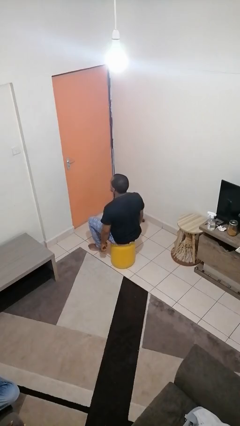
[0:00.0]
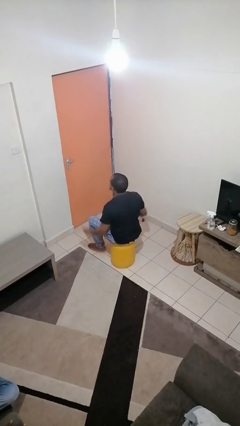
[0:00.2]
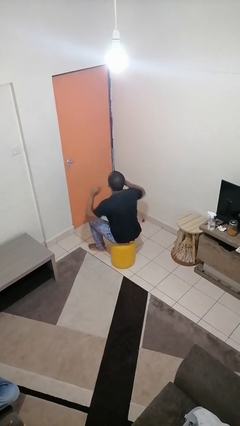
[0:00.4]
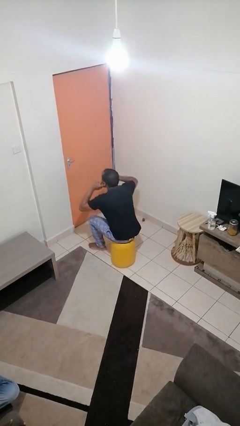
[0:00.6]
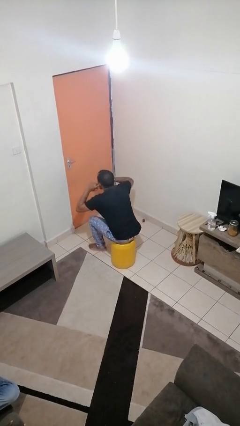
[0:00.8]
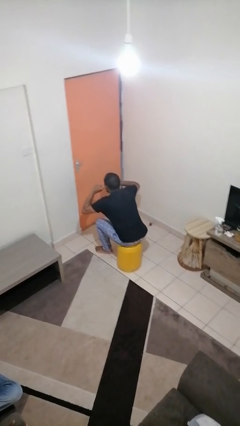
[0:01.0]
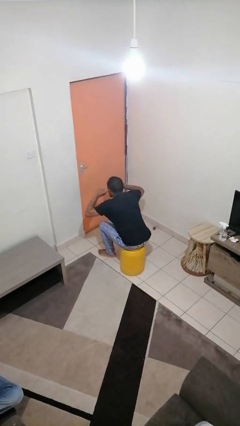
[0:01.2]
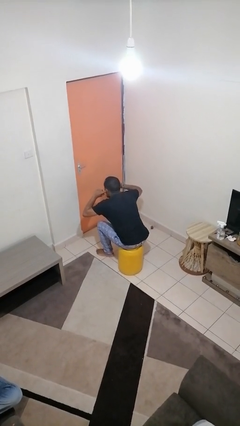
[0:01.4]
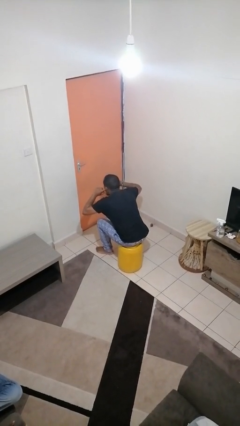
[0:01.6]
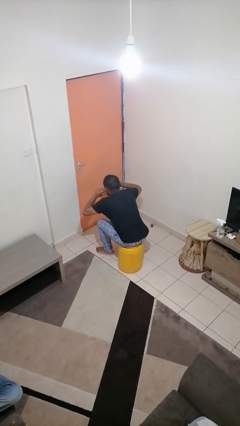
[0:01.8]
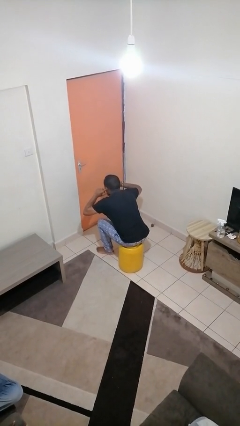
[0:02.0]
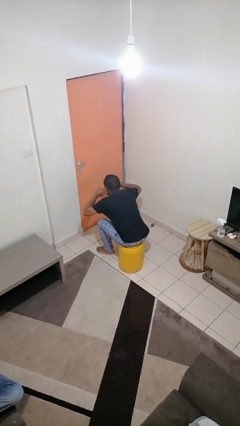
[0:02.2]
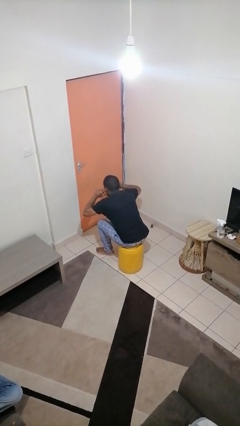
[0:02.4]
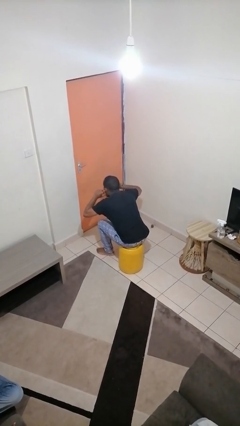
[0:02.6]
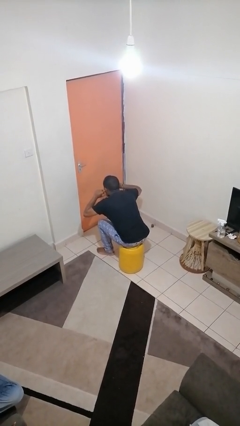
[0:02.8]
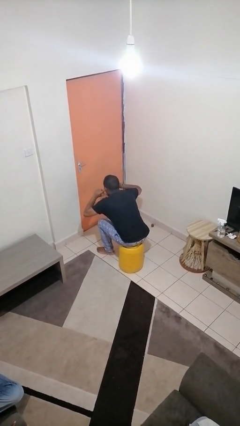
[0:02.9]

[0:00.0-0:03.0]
person puts fingers in ear

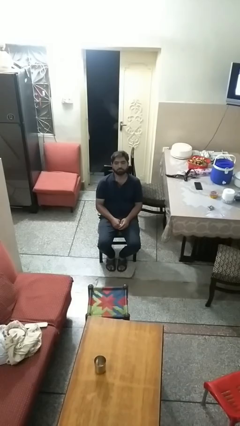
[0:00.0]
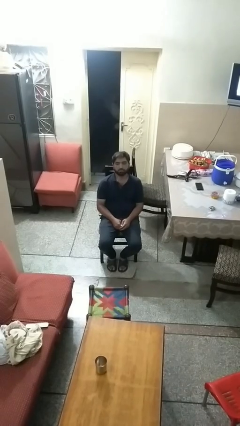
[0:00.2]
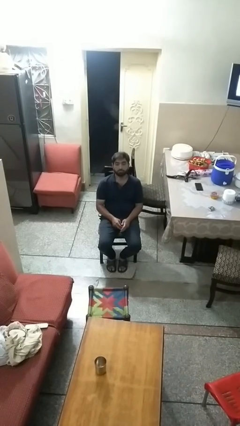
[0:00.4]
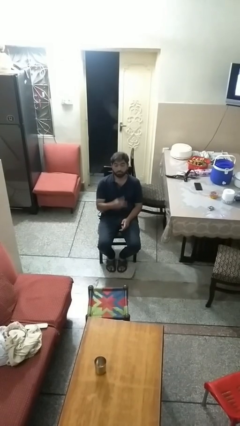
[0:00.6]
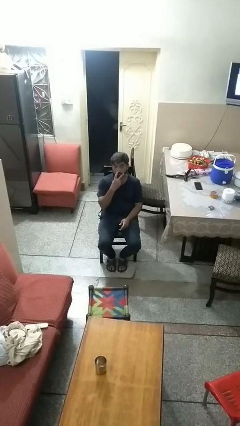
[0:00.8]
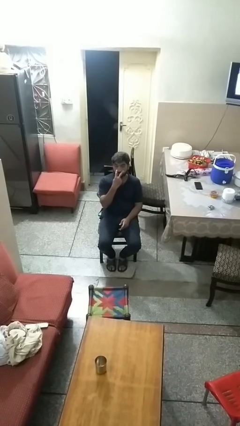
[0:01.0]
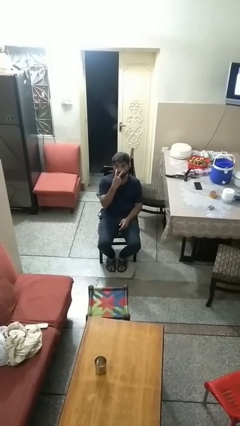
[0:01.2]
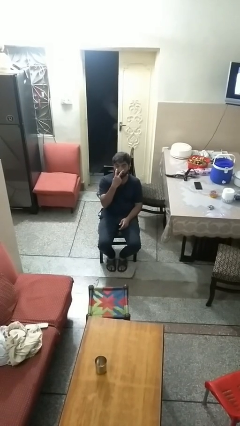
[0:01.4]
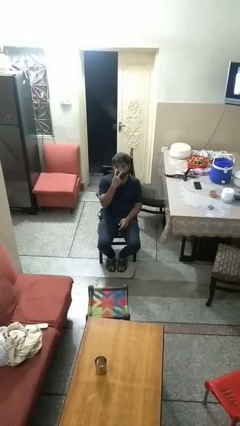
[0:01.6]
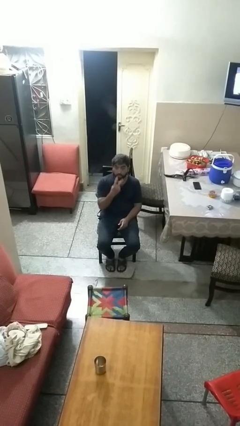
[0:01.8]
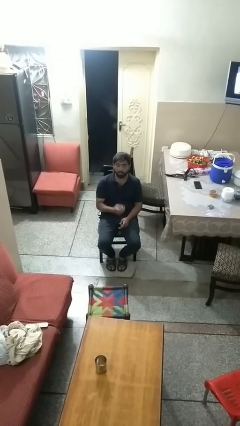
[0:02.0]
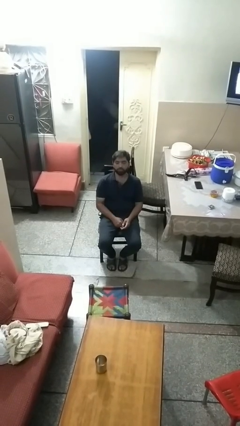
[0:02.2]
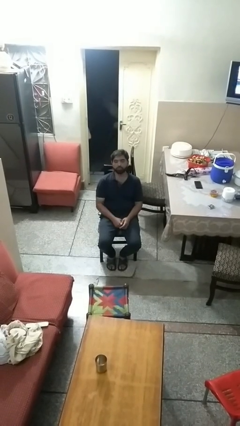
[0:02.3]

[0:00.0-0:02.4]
person gestures watch closely

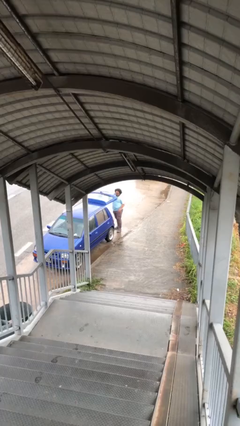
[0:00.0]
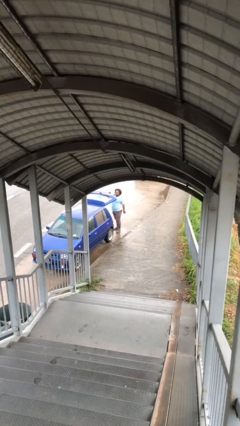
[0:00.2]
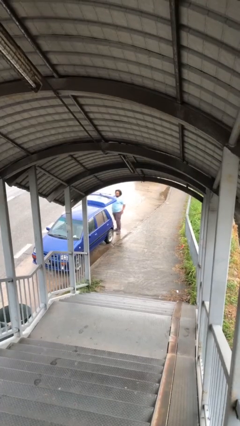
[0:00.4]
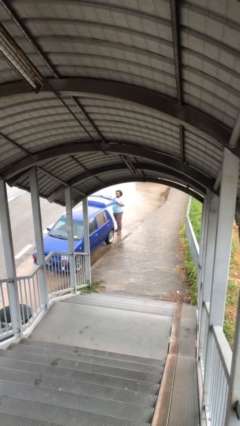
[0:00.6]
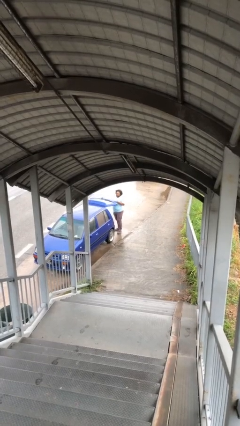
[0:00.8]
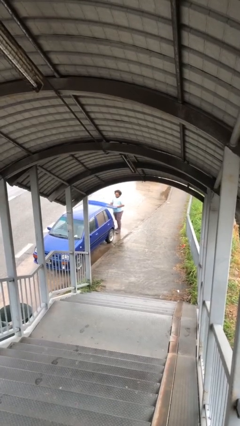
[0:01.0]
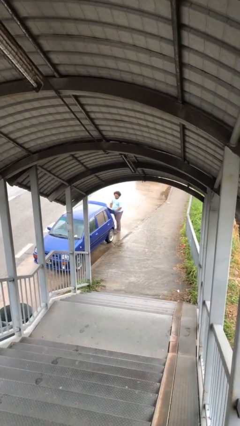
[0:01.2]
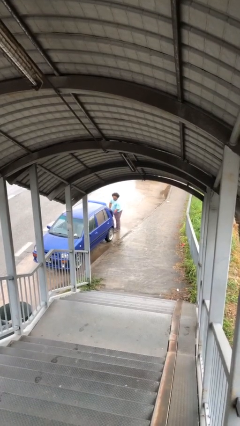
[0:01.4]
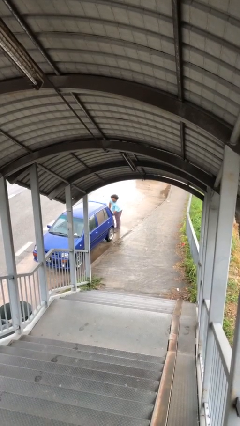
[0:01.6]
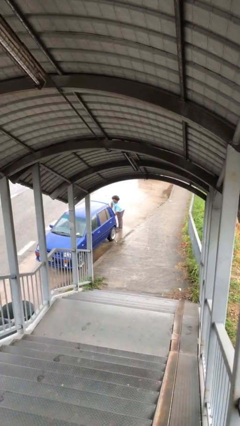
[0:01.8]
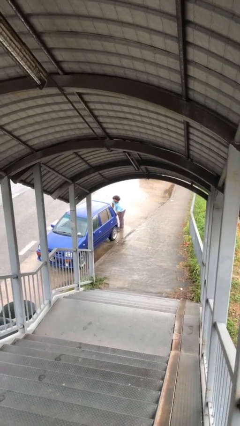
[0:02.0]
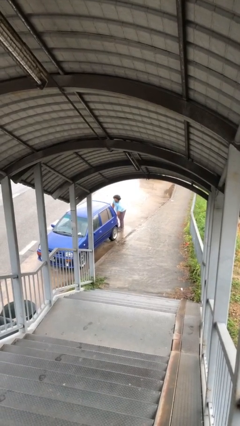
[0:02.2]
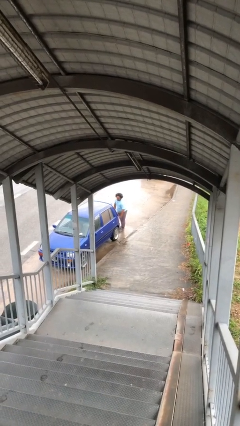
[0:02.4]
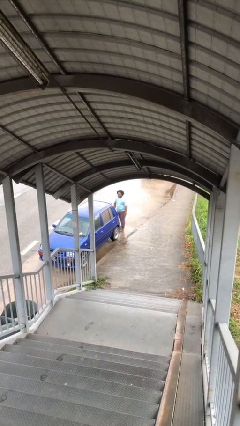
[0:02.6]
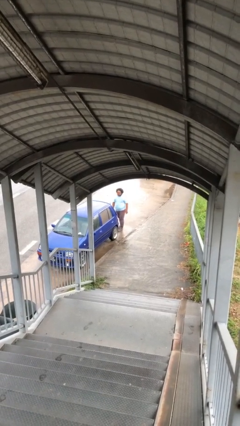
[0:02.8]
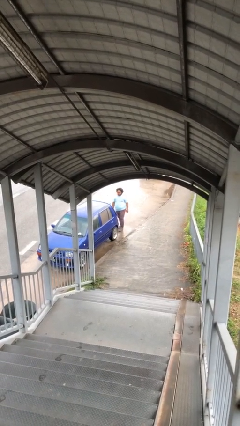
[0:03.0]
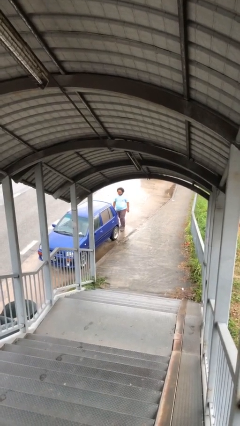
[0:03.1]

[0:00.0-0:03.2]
person closes car trunk

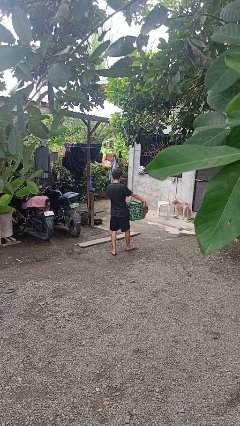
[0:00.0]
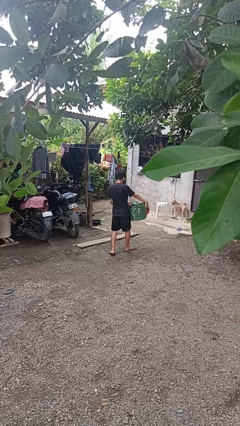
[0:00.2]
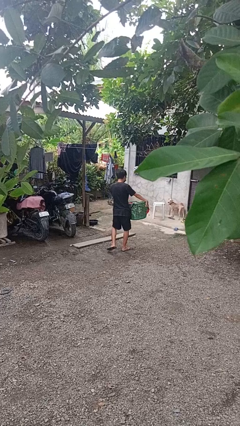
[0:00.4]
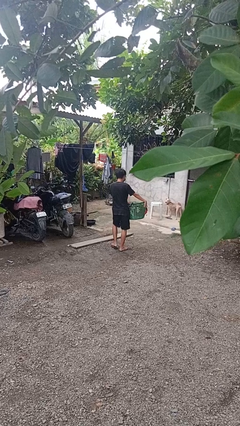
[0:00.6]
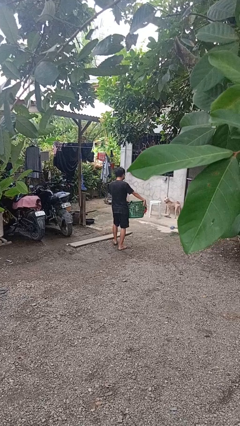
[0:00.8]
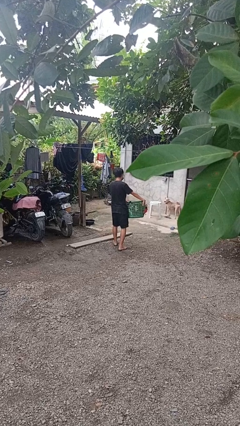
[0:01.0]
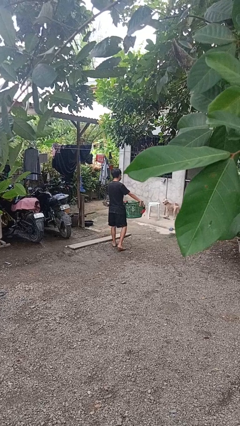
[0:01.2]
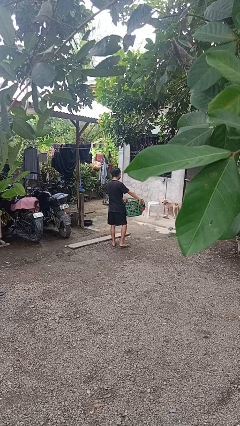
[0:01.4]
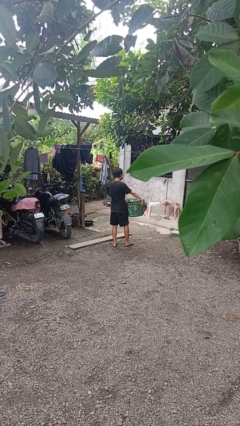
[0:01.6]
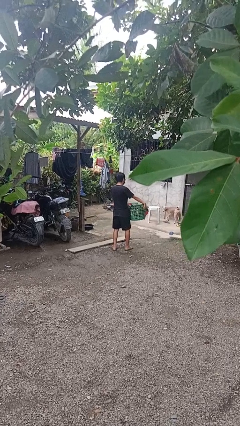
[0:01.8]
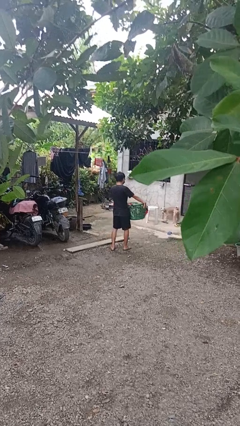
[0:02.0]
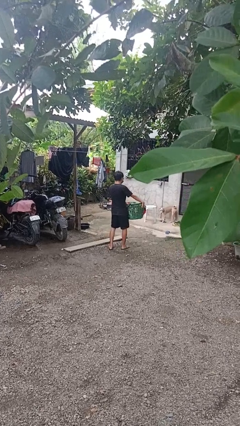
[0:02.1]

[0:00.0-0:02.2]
person carries laundry basket

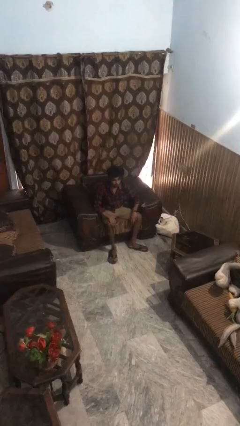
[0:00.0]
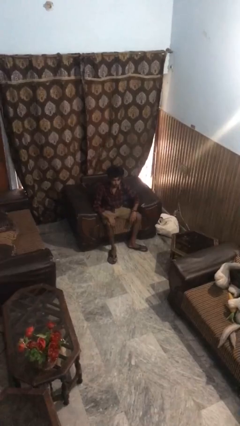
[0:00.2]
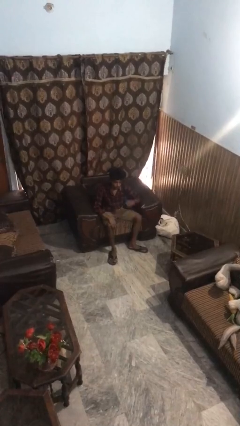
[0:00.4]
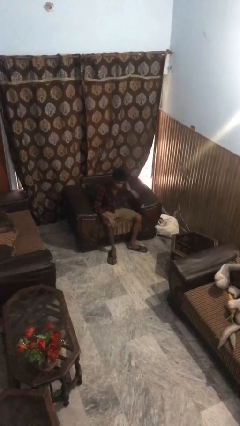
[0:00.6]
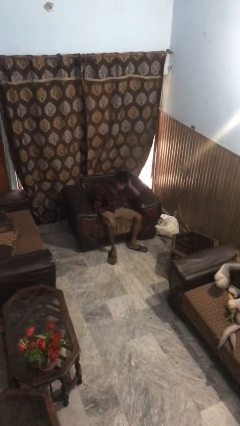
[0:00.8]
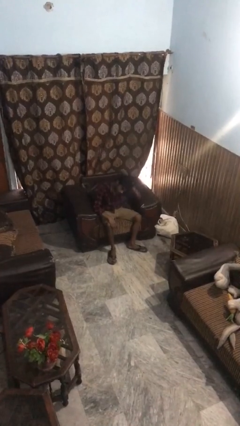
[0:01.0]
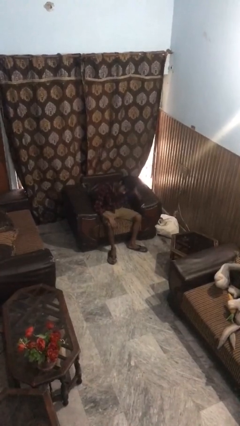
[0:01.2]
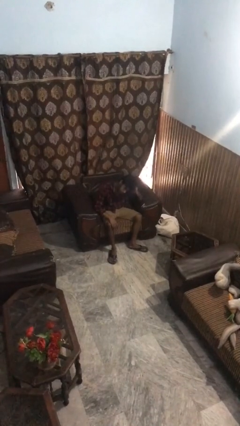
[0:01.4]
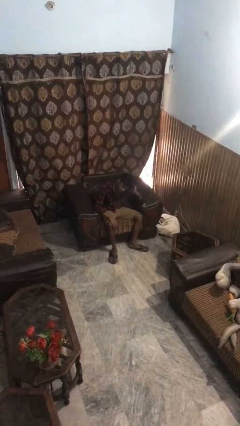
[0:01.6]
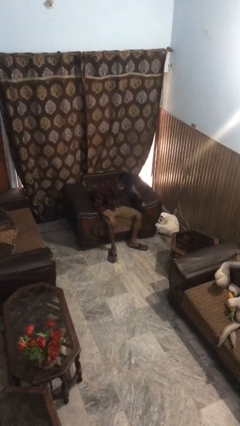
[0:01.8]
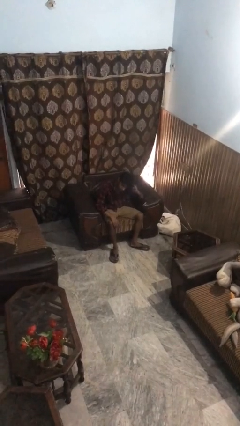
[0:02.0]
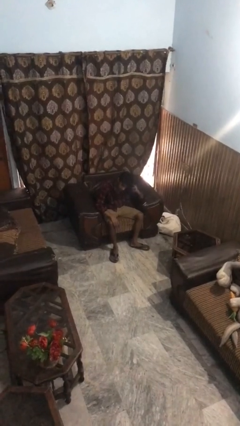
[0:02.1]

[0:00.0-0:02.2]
person strokes hair

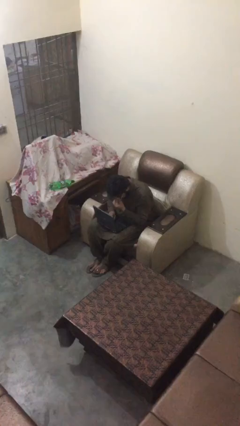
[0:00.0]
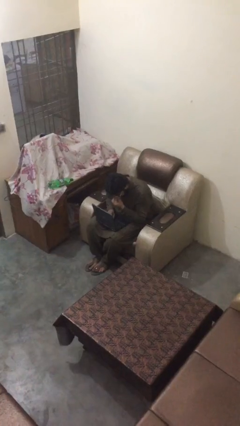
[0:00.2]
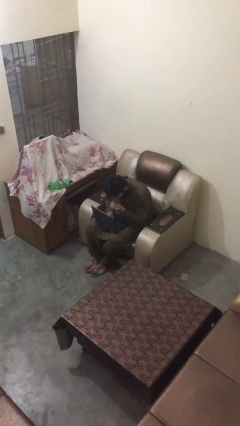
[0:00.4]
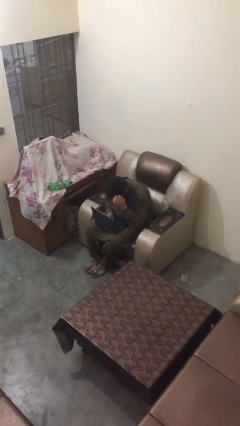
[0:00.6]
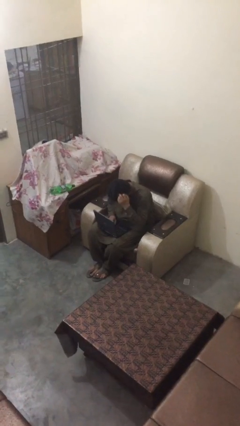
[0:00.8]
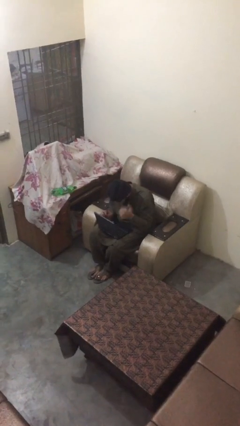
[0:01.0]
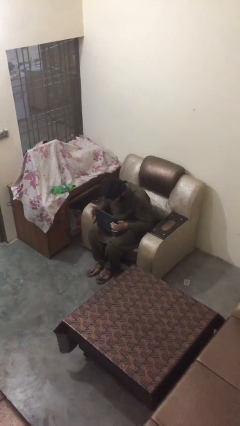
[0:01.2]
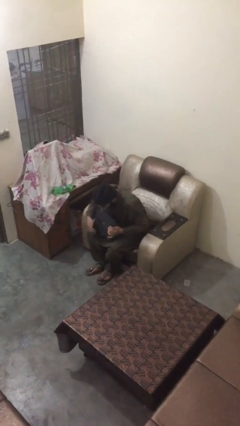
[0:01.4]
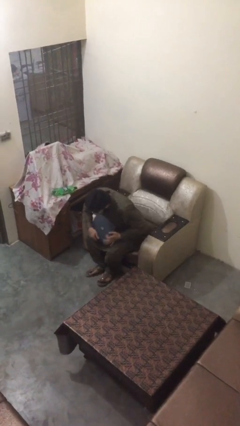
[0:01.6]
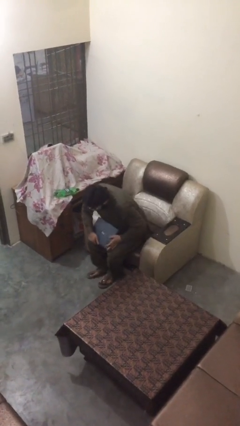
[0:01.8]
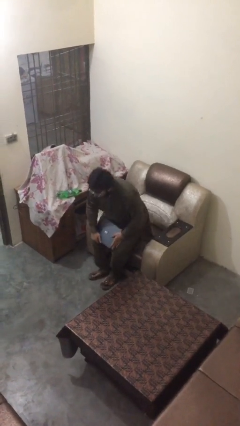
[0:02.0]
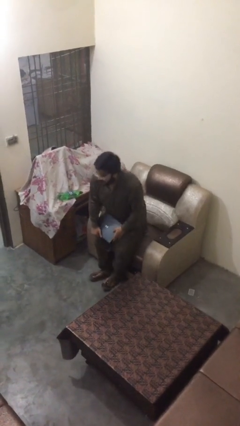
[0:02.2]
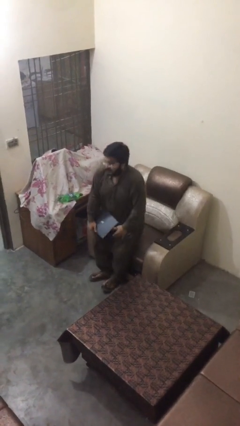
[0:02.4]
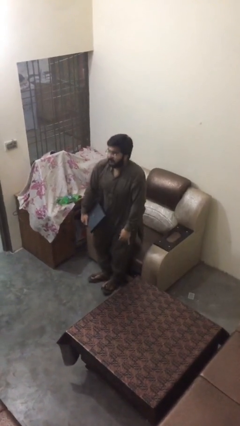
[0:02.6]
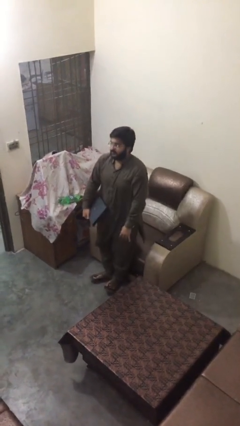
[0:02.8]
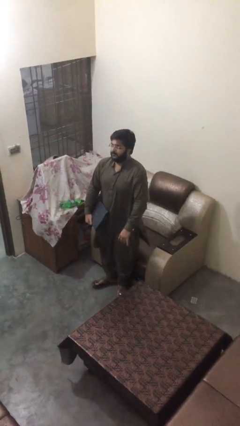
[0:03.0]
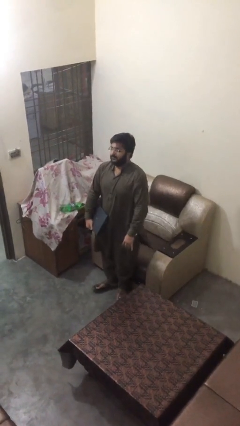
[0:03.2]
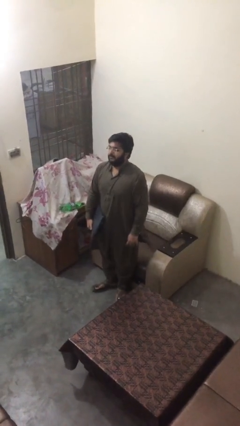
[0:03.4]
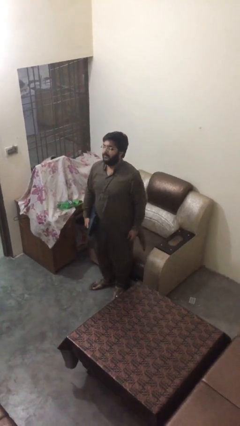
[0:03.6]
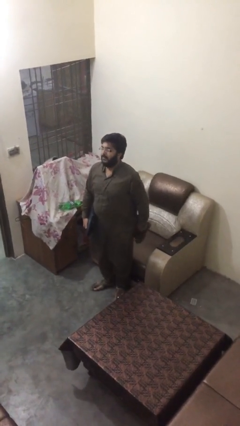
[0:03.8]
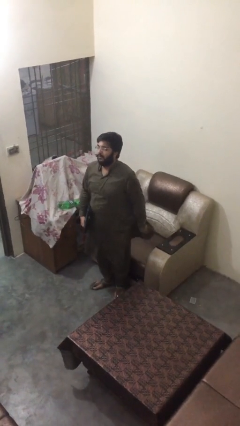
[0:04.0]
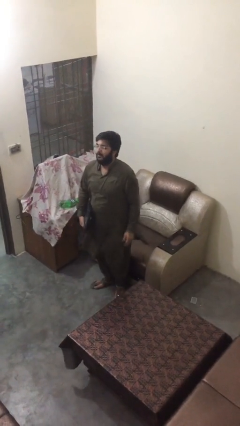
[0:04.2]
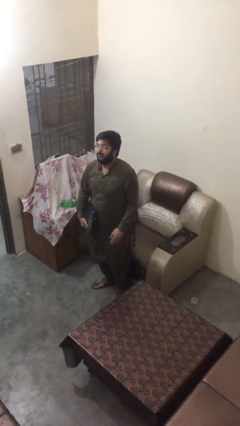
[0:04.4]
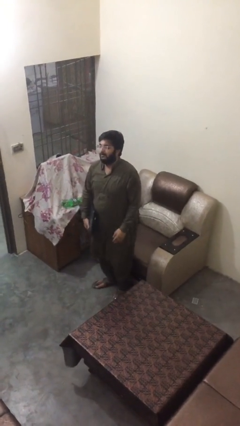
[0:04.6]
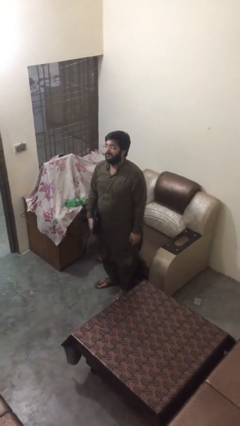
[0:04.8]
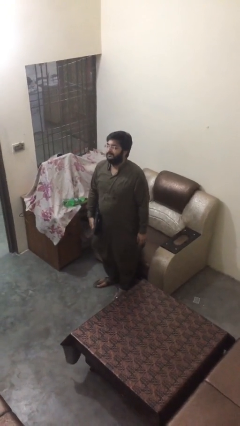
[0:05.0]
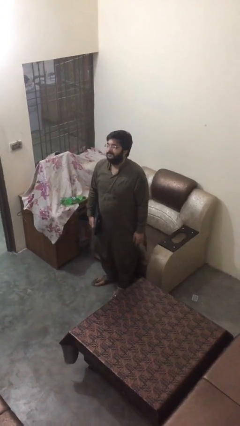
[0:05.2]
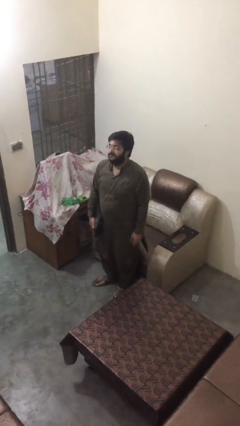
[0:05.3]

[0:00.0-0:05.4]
person stands up
